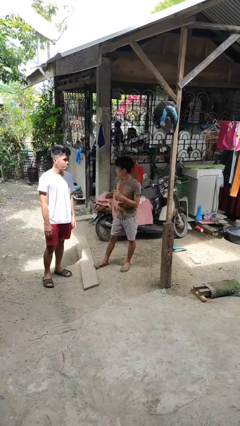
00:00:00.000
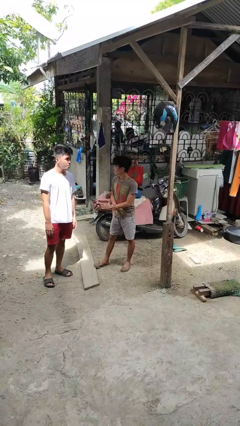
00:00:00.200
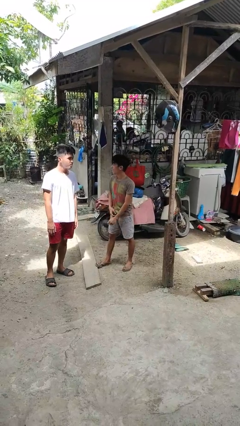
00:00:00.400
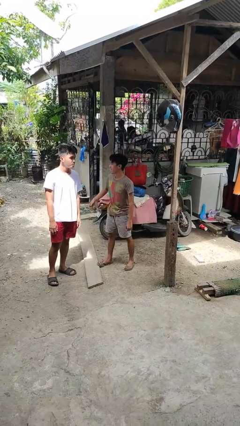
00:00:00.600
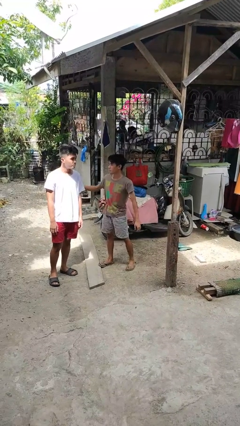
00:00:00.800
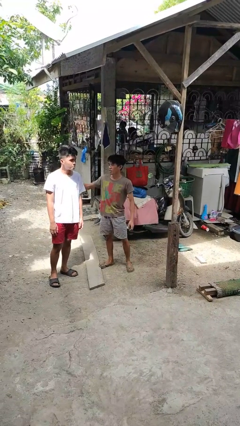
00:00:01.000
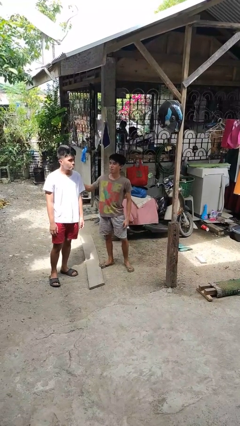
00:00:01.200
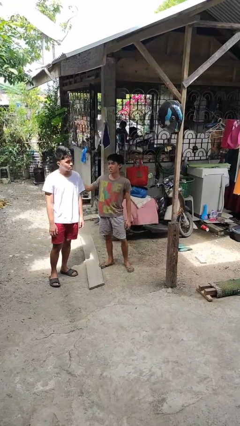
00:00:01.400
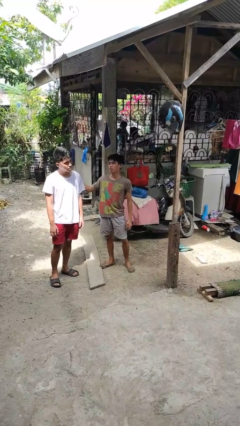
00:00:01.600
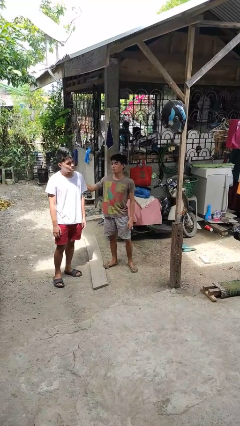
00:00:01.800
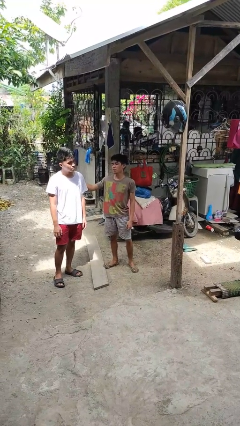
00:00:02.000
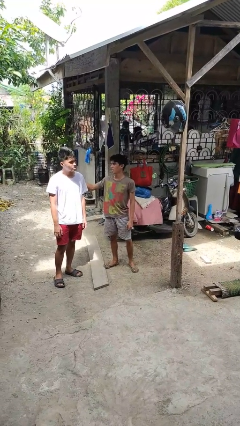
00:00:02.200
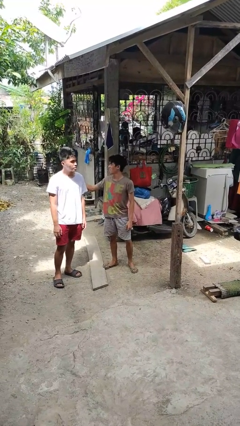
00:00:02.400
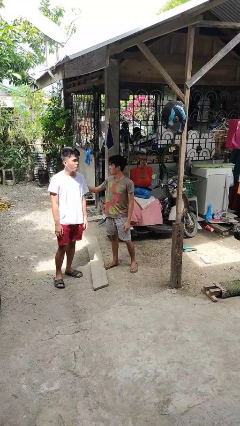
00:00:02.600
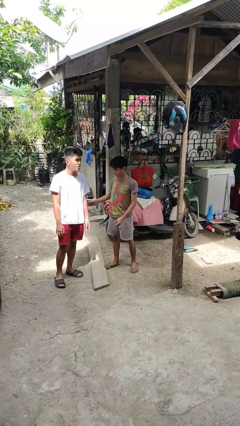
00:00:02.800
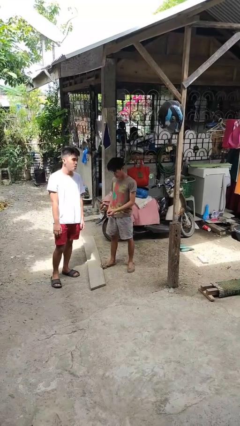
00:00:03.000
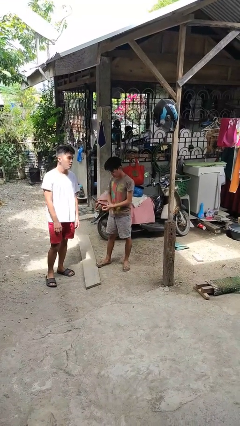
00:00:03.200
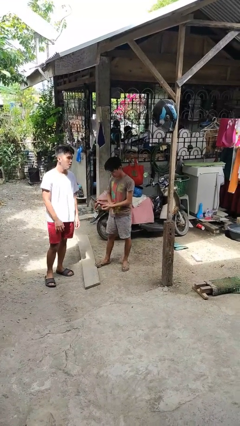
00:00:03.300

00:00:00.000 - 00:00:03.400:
person touches back of person

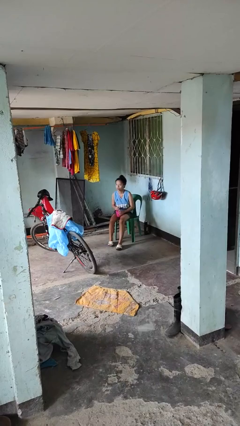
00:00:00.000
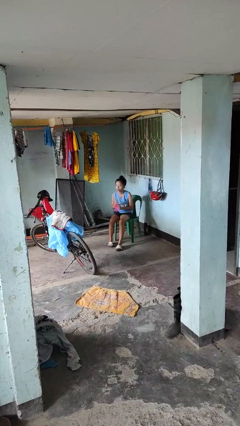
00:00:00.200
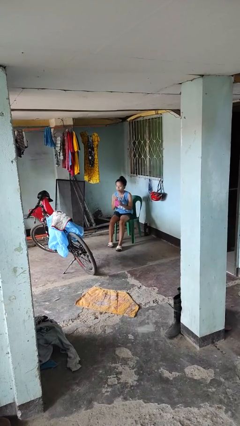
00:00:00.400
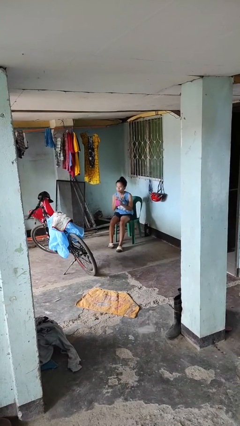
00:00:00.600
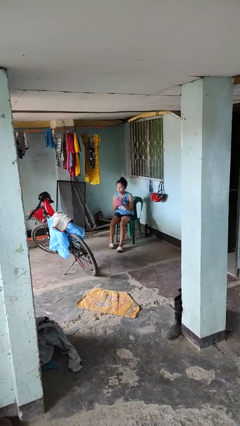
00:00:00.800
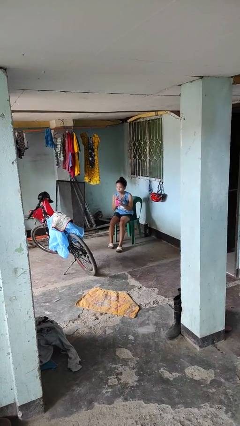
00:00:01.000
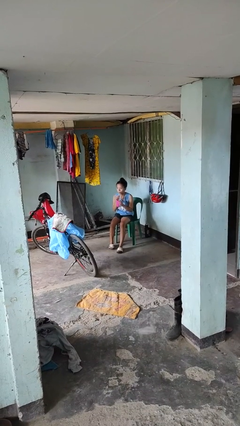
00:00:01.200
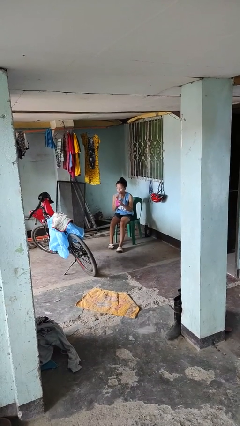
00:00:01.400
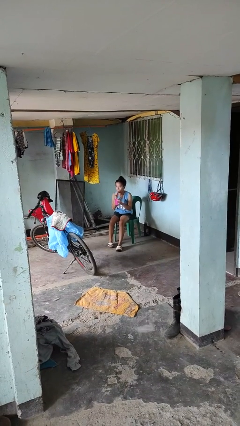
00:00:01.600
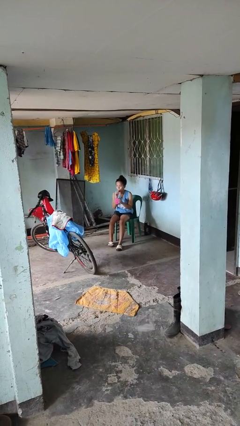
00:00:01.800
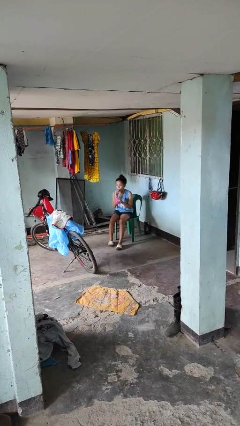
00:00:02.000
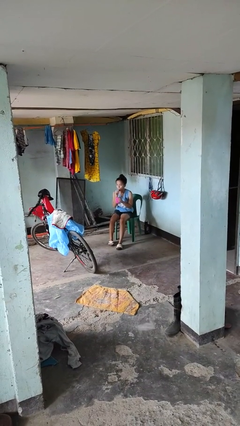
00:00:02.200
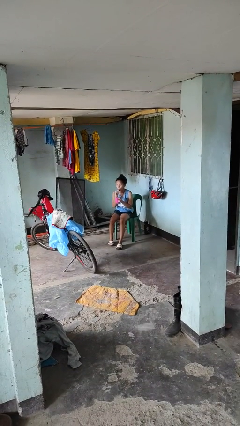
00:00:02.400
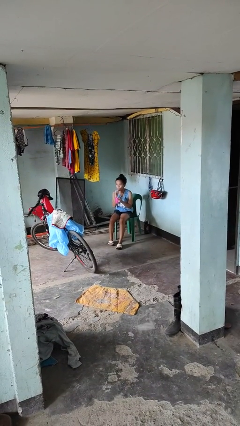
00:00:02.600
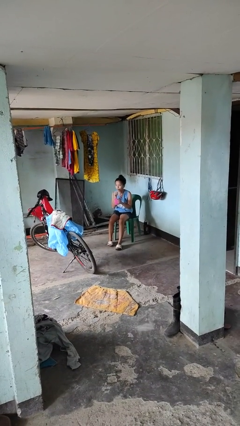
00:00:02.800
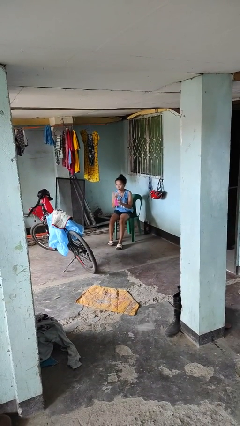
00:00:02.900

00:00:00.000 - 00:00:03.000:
person drinks from straw

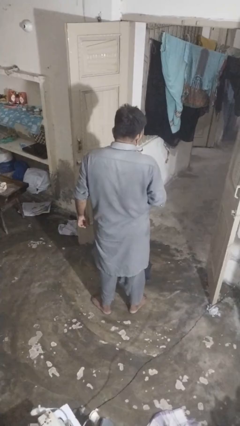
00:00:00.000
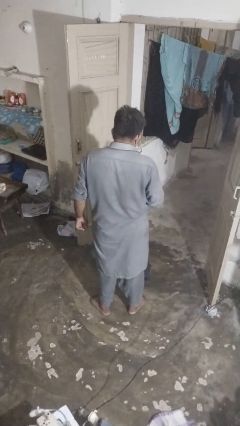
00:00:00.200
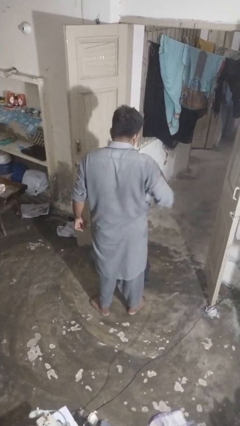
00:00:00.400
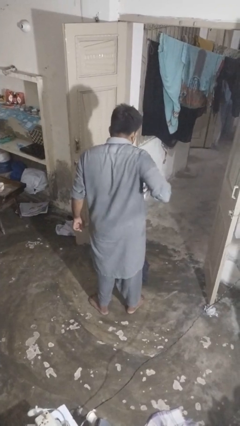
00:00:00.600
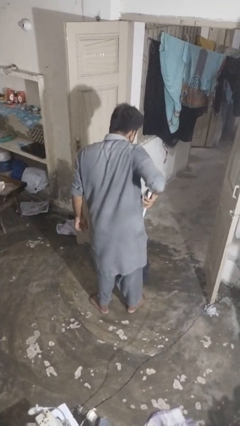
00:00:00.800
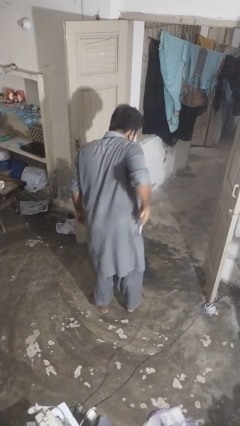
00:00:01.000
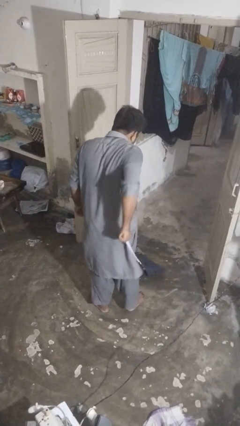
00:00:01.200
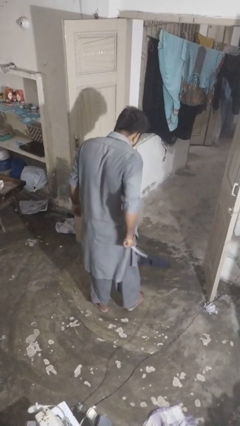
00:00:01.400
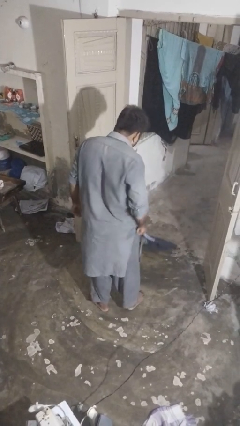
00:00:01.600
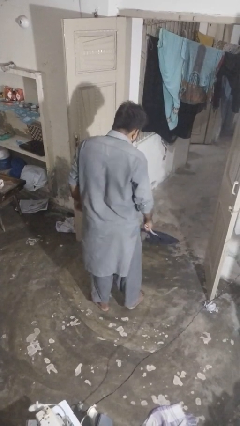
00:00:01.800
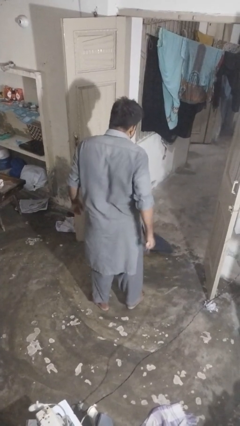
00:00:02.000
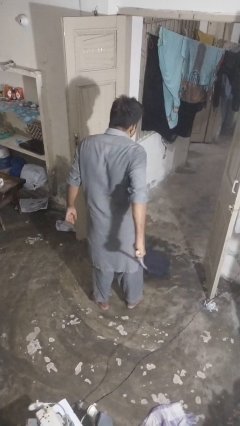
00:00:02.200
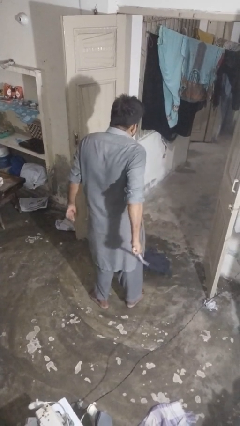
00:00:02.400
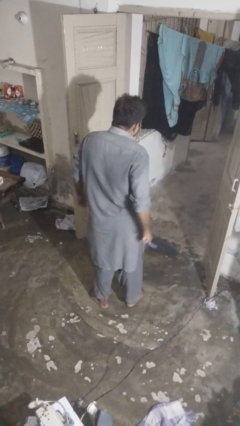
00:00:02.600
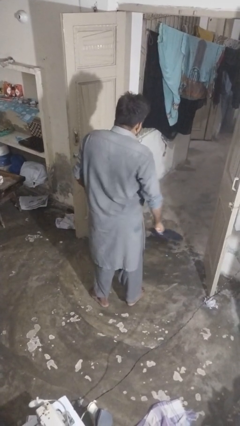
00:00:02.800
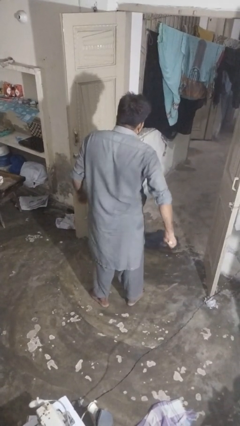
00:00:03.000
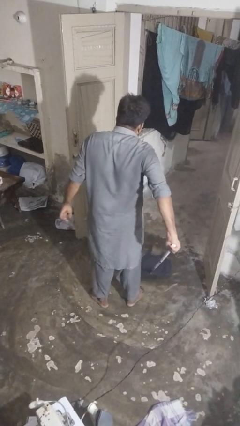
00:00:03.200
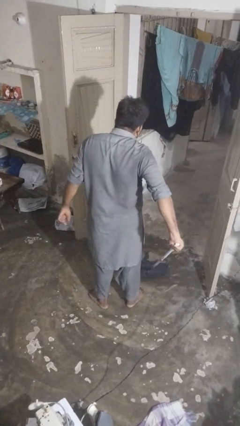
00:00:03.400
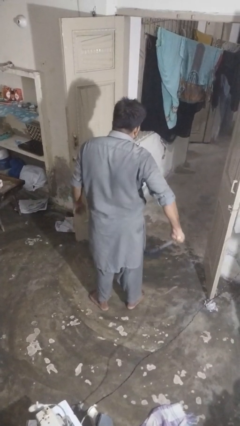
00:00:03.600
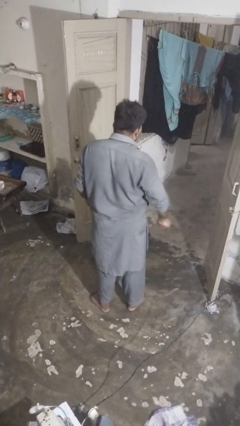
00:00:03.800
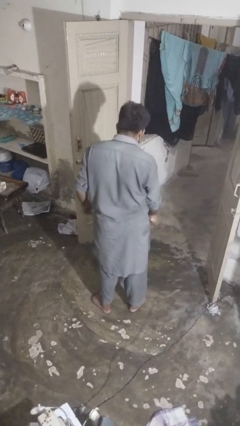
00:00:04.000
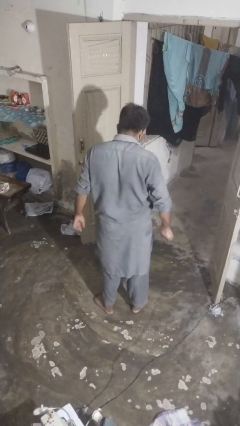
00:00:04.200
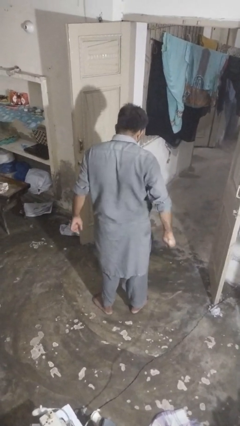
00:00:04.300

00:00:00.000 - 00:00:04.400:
person mops

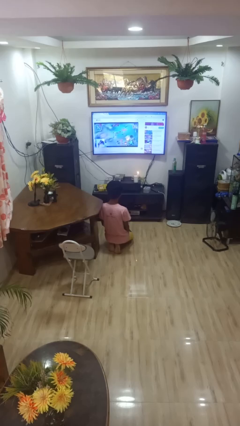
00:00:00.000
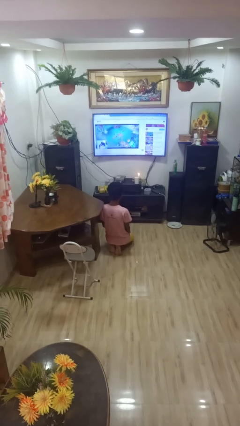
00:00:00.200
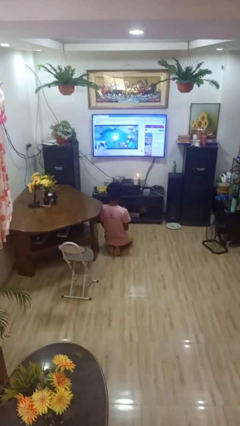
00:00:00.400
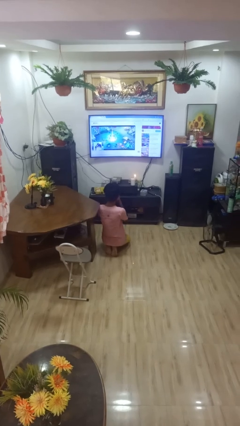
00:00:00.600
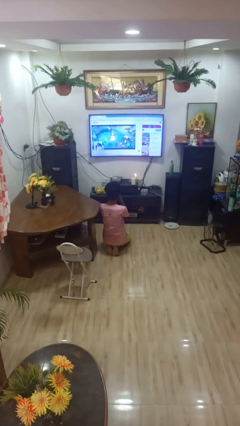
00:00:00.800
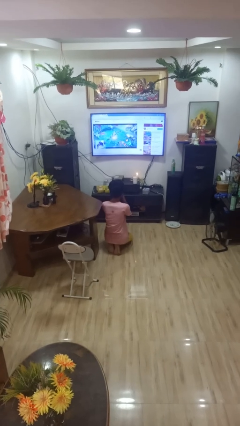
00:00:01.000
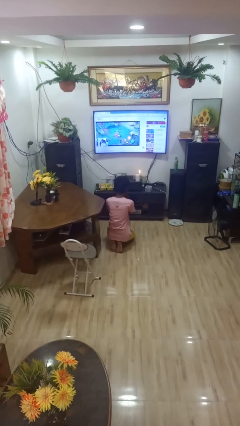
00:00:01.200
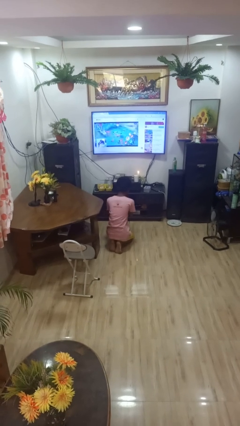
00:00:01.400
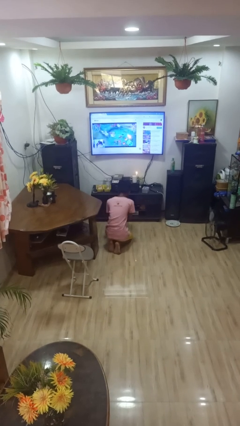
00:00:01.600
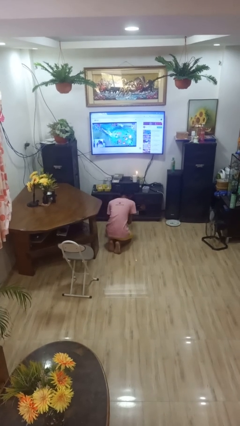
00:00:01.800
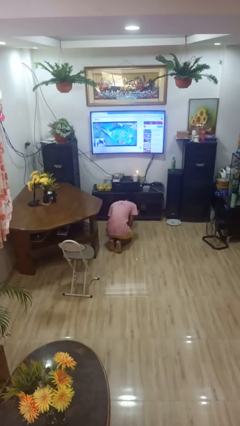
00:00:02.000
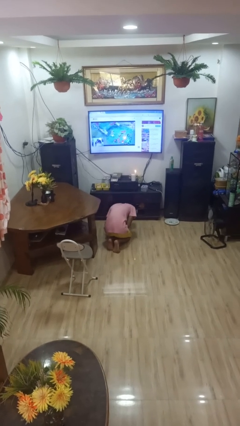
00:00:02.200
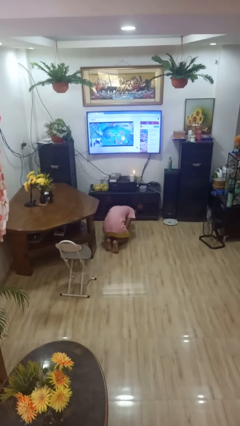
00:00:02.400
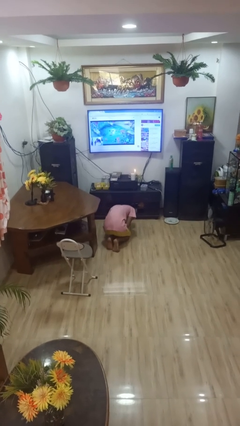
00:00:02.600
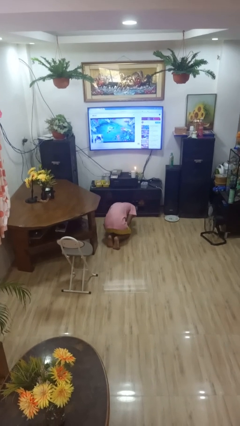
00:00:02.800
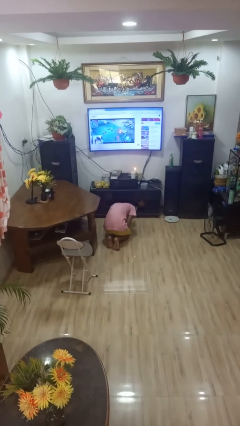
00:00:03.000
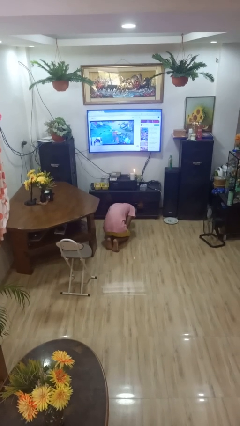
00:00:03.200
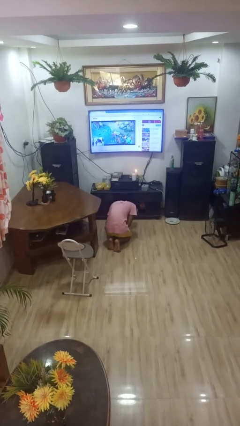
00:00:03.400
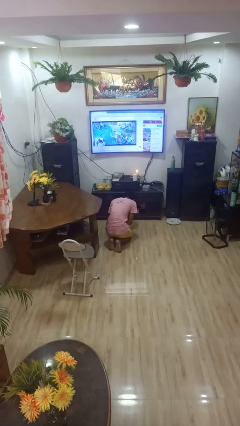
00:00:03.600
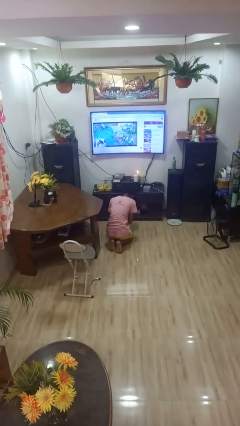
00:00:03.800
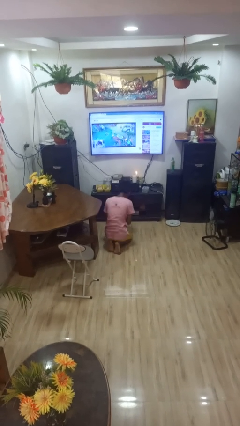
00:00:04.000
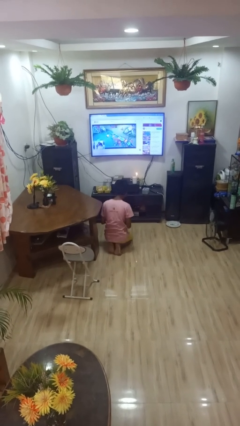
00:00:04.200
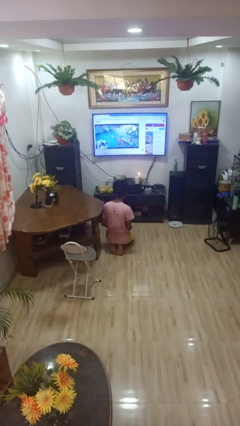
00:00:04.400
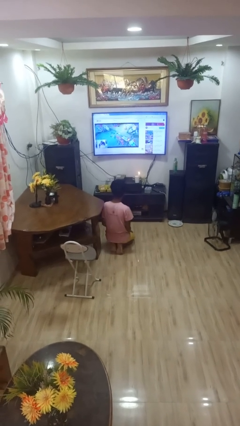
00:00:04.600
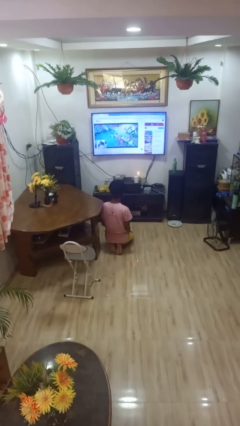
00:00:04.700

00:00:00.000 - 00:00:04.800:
person prays

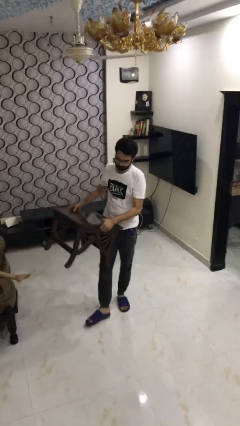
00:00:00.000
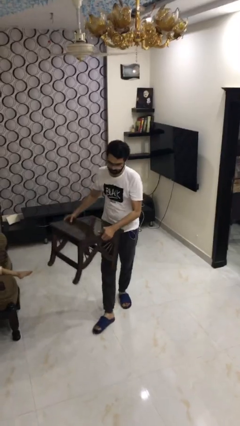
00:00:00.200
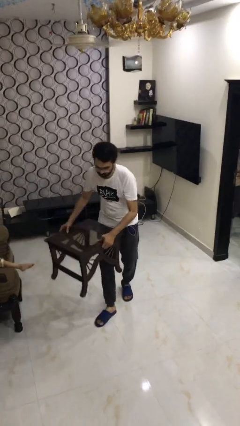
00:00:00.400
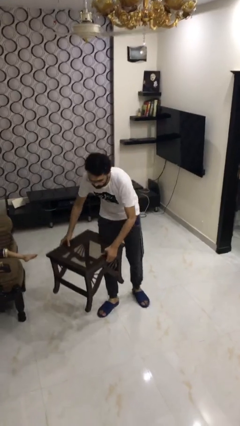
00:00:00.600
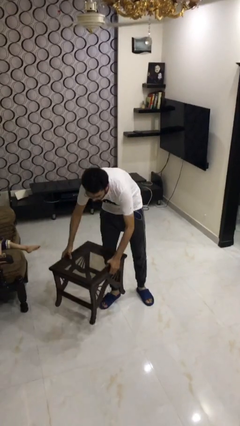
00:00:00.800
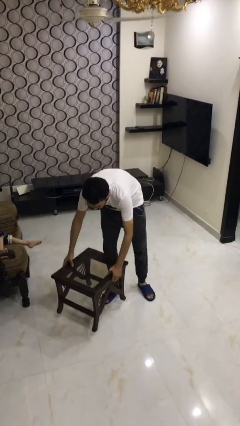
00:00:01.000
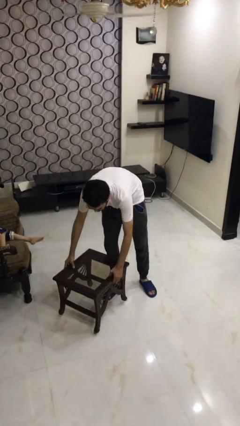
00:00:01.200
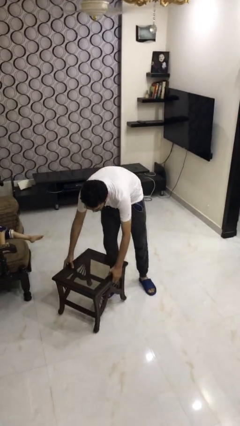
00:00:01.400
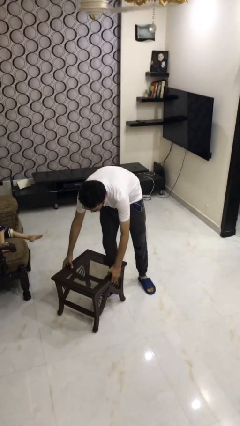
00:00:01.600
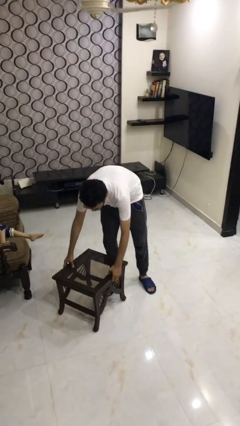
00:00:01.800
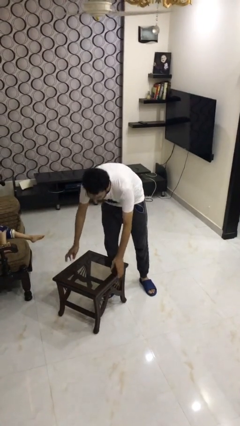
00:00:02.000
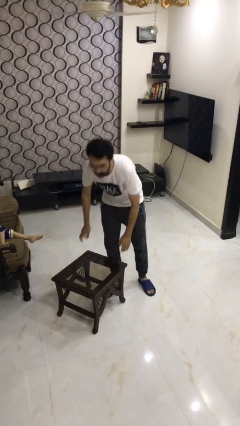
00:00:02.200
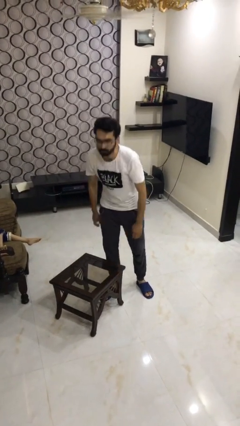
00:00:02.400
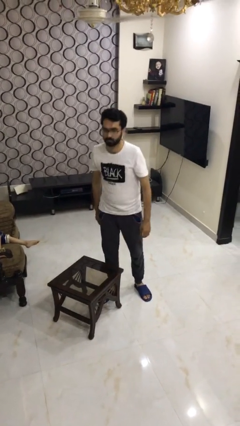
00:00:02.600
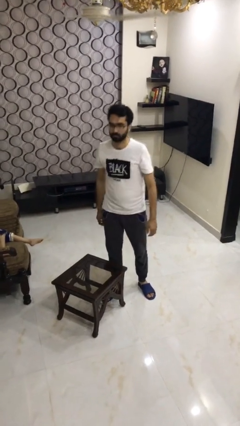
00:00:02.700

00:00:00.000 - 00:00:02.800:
person puts down object on floor
